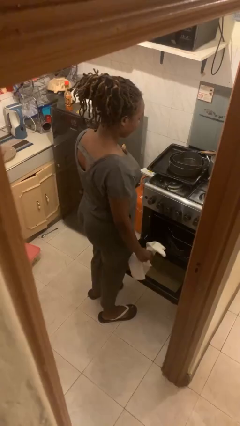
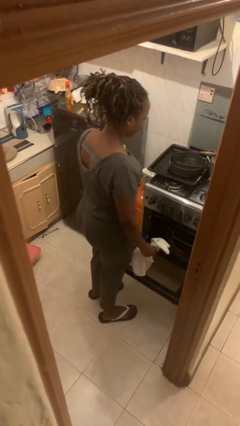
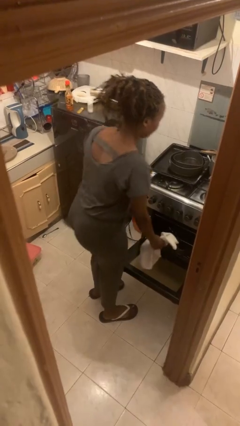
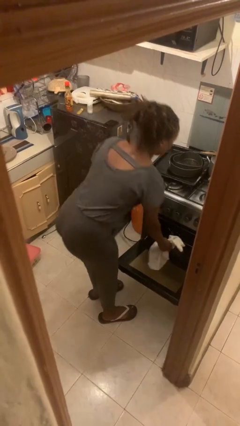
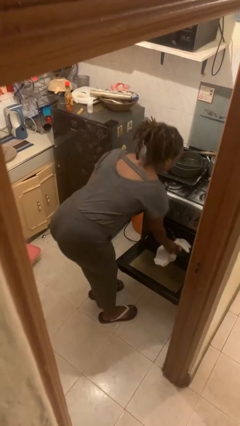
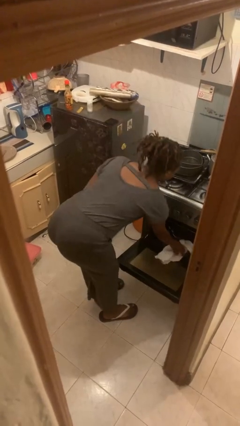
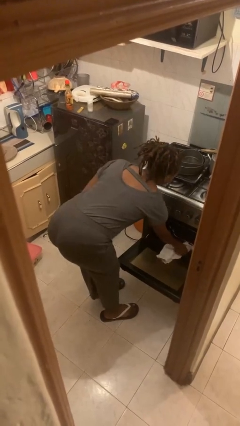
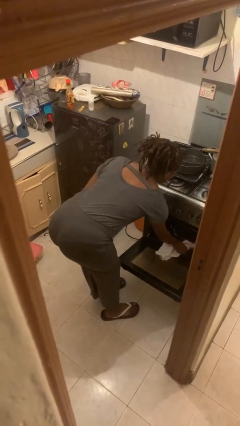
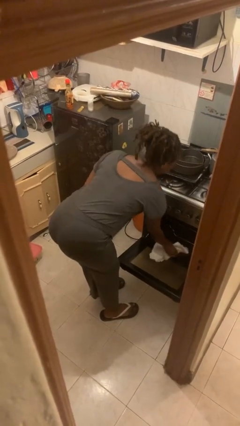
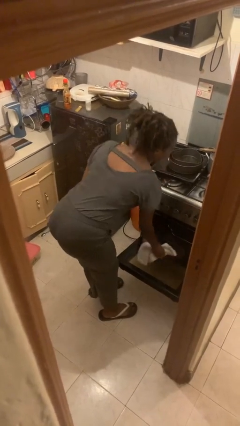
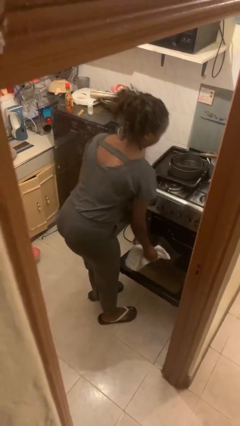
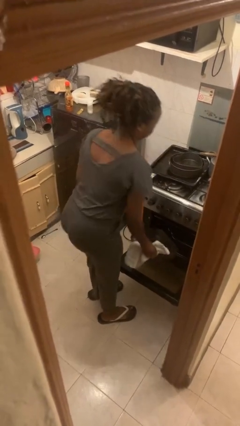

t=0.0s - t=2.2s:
person takes object from oven

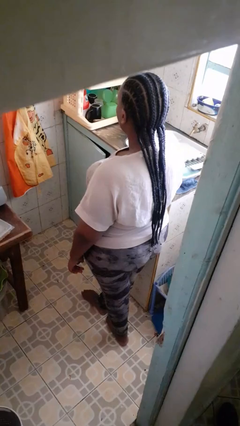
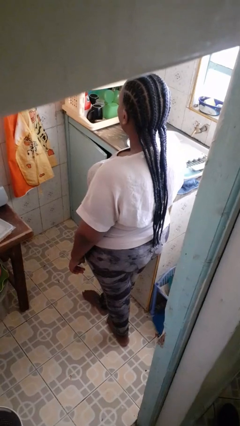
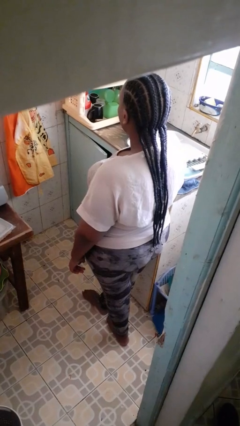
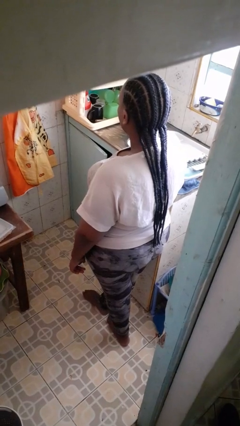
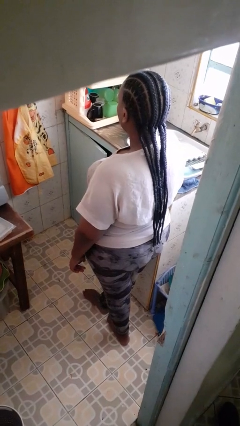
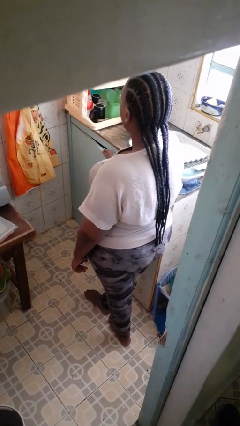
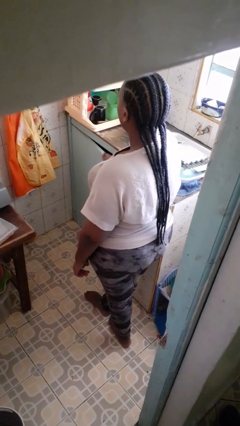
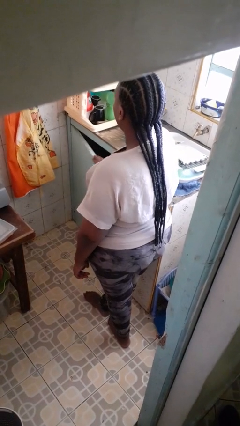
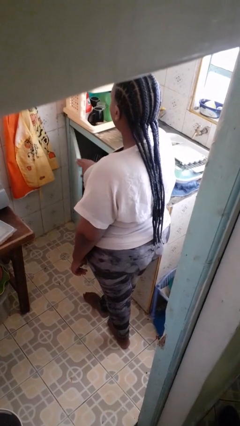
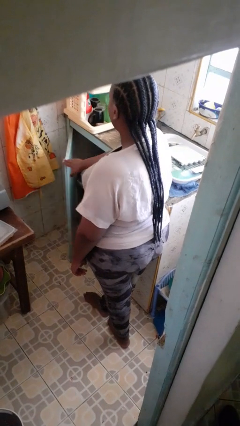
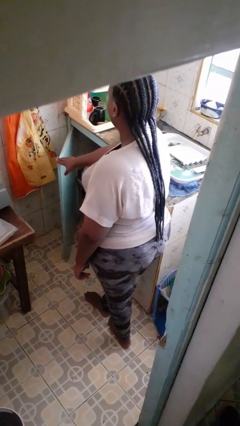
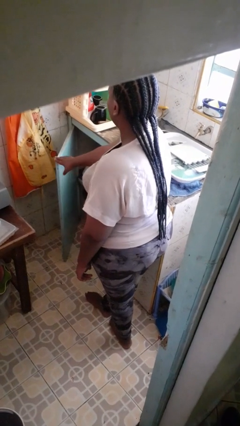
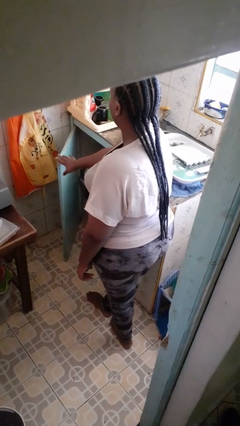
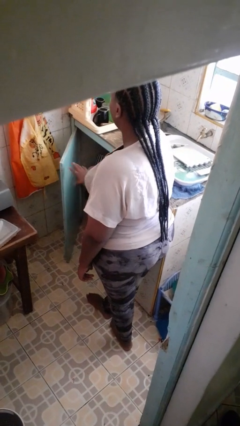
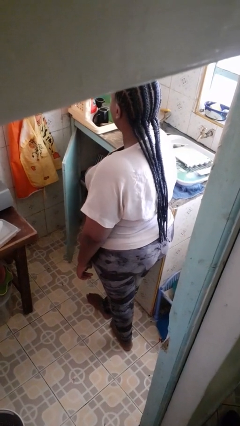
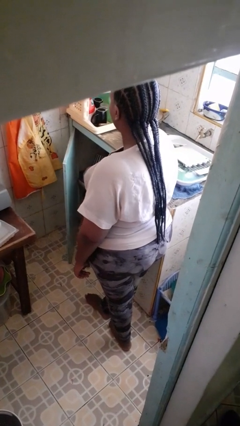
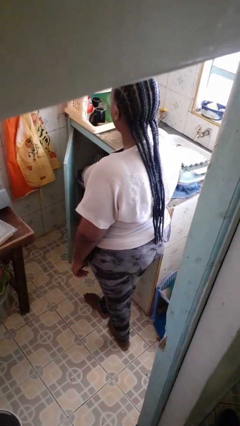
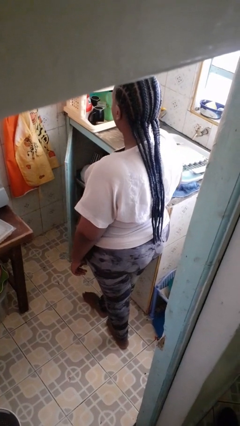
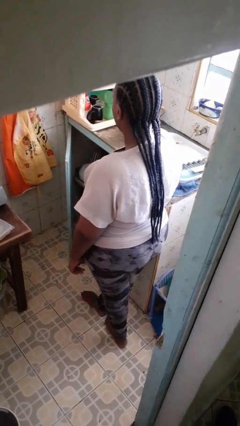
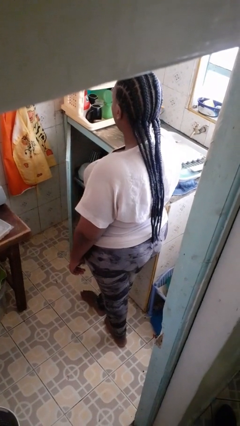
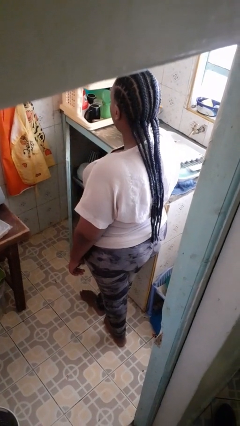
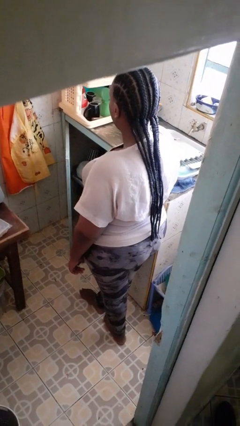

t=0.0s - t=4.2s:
person opens cabinet

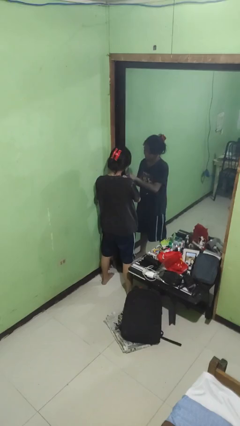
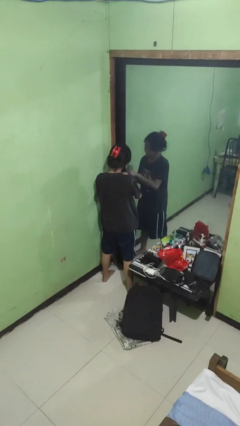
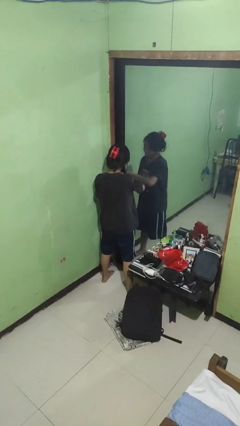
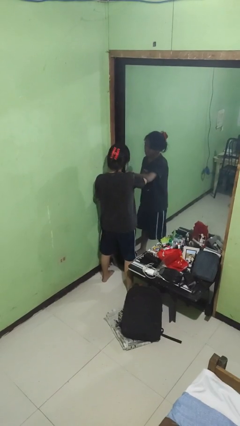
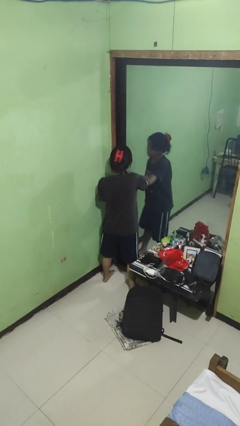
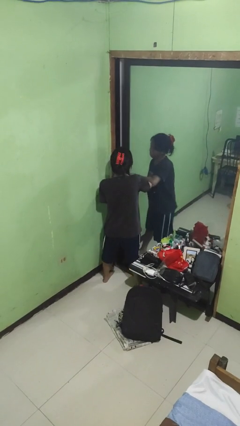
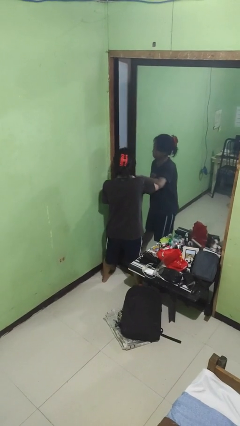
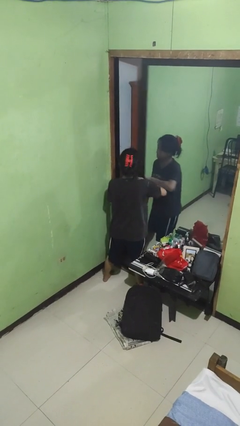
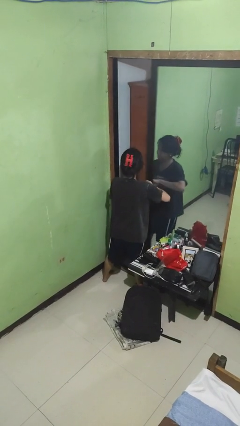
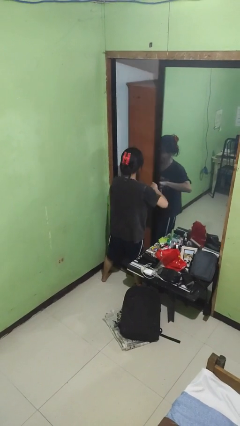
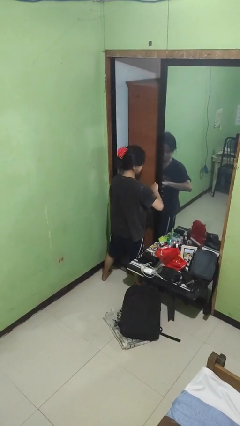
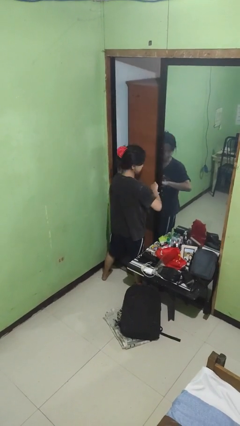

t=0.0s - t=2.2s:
person opens sliding door

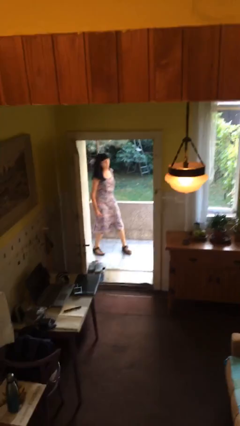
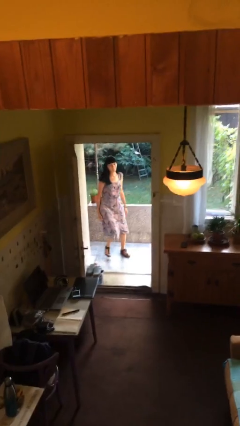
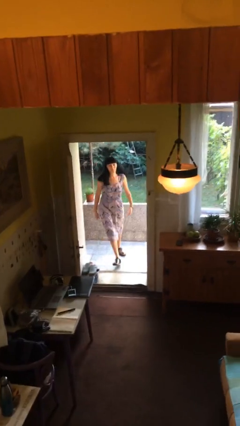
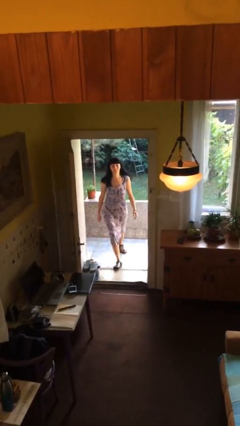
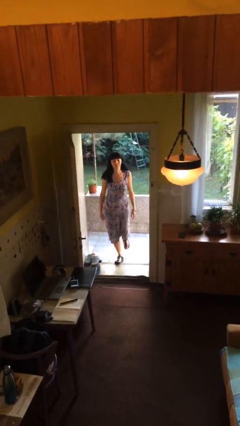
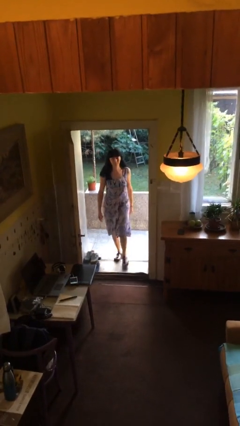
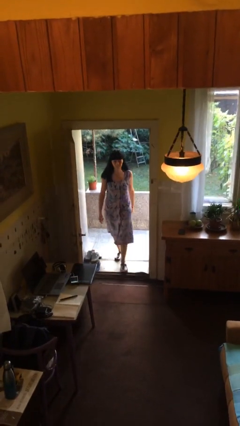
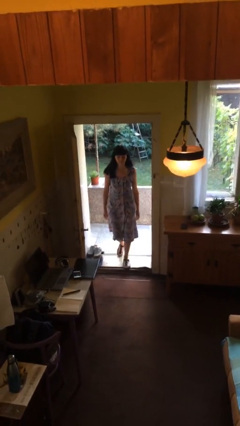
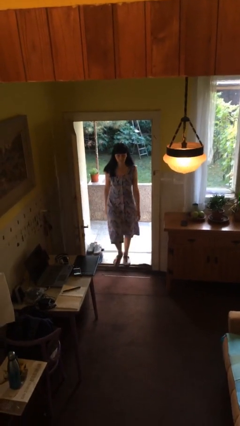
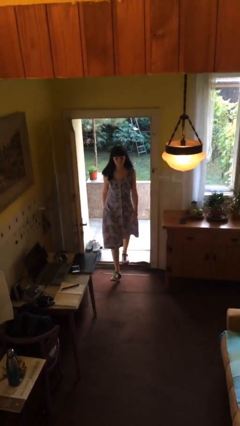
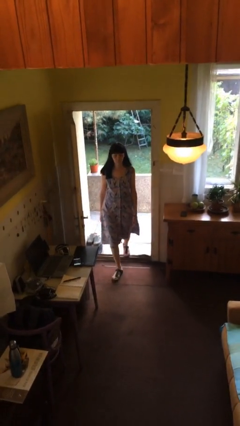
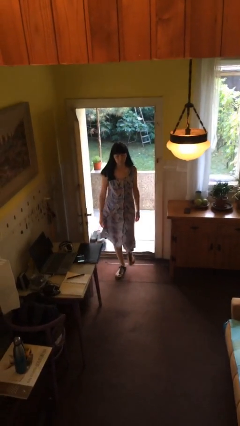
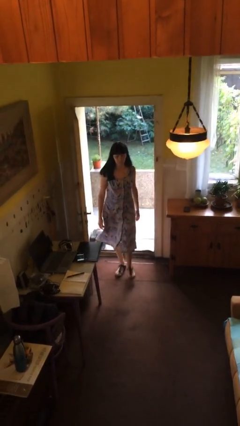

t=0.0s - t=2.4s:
person enters scene through structure

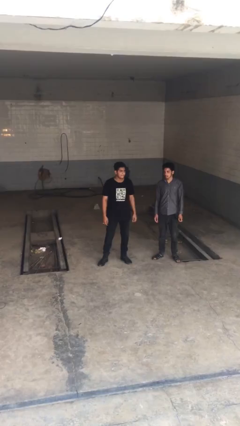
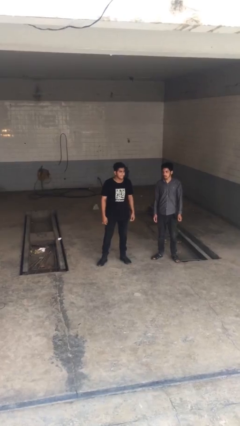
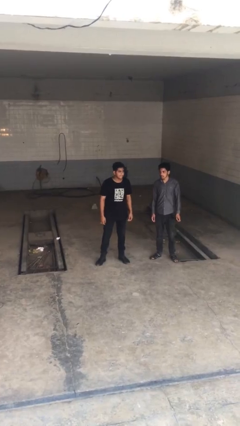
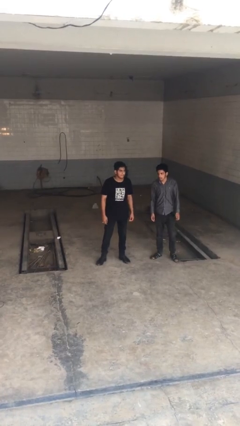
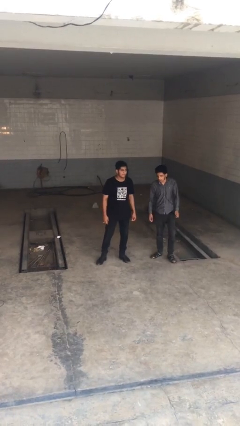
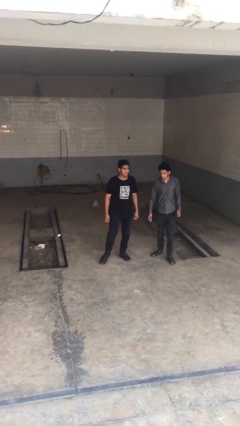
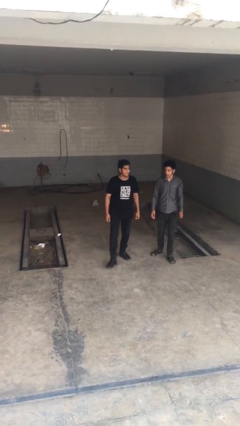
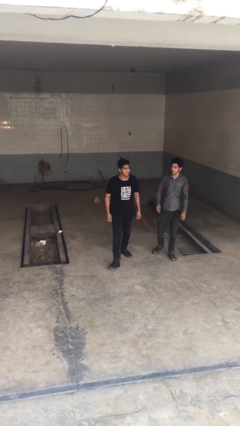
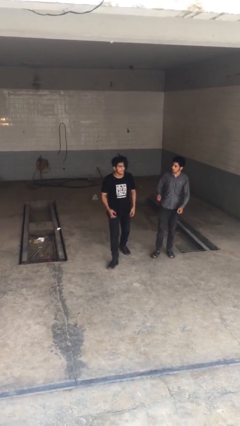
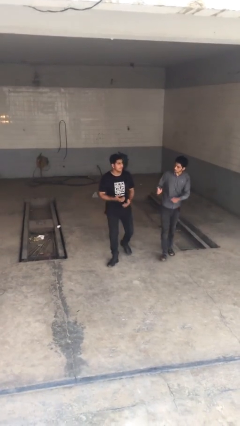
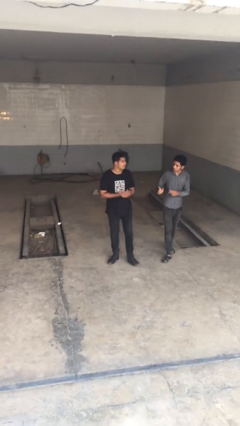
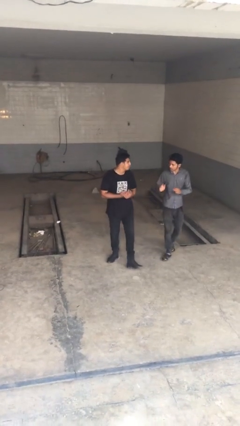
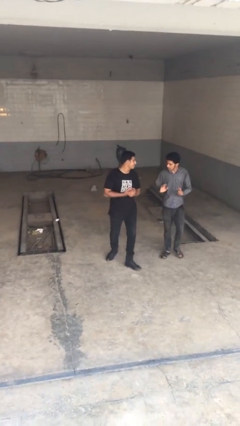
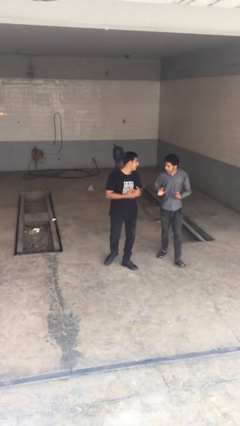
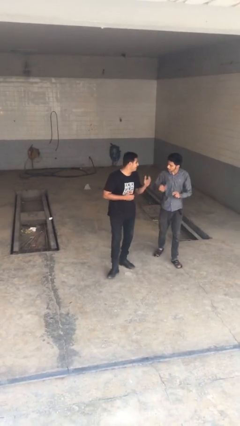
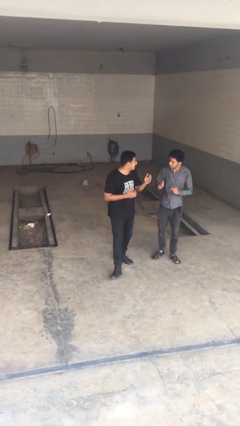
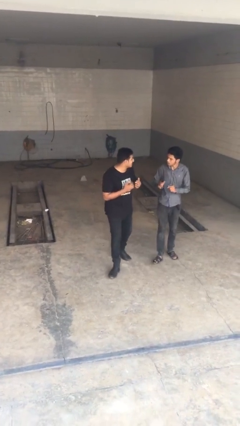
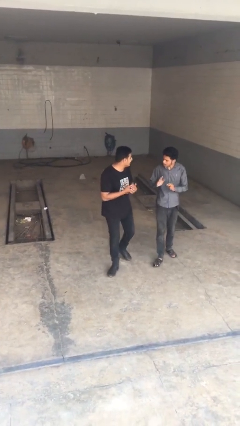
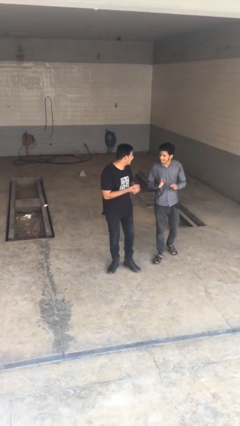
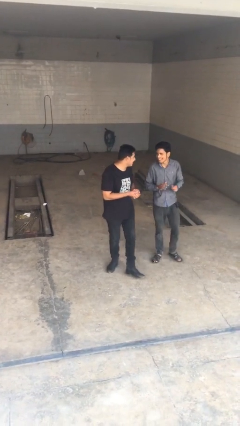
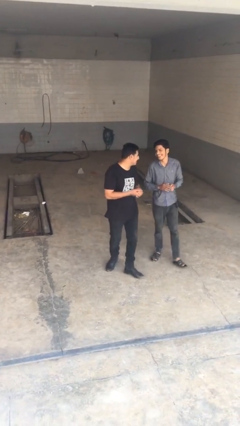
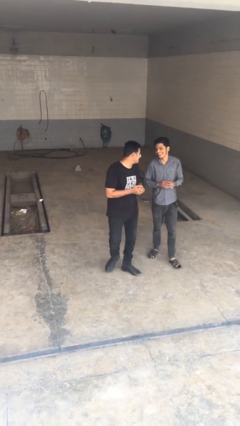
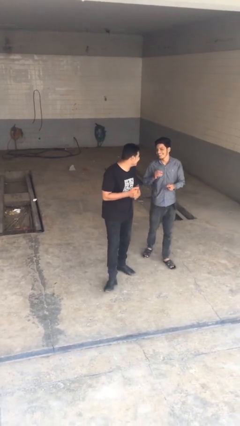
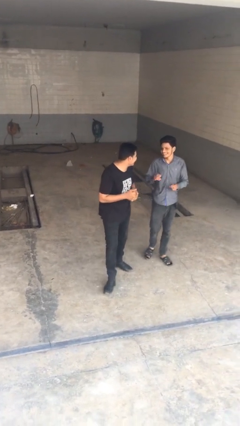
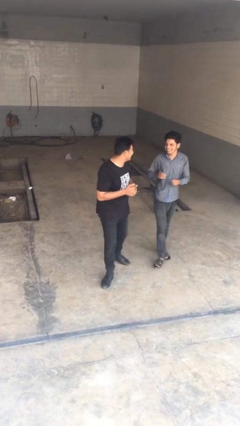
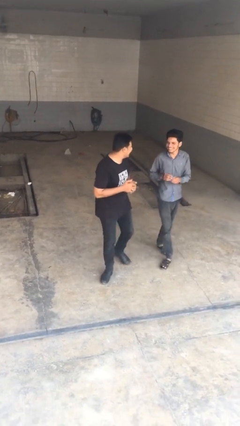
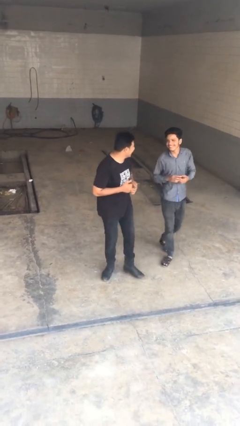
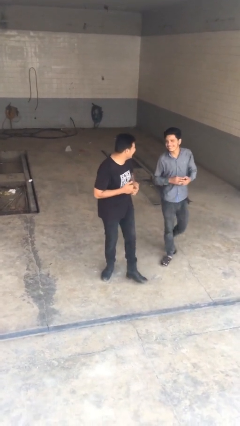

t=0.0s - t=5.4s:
person talks to person

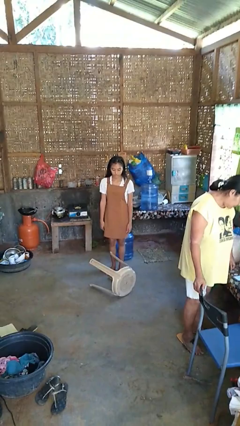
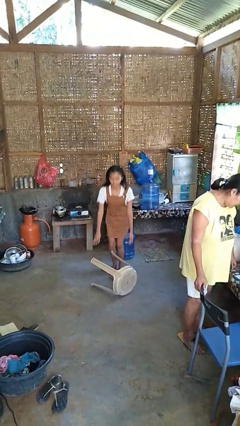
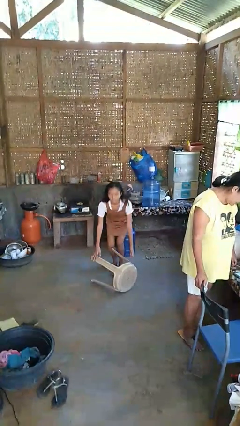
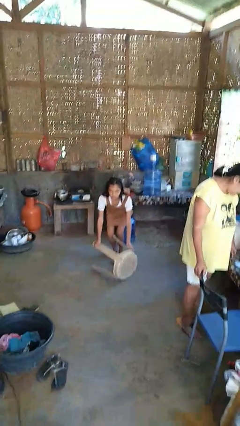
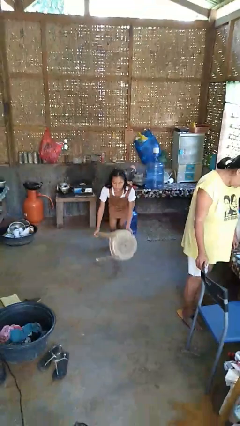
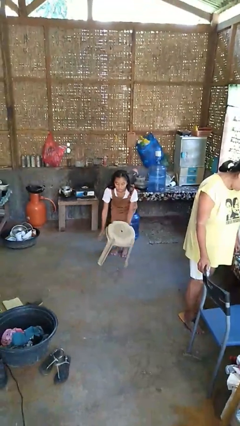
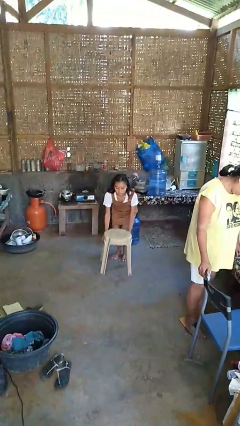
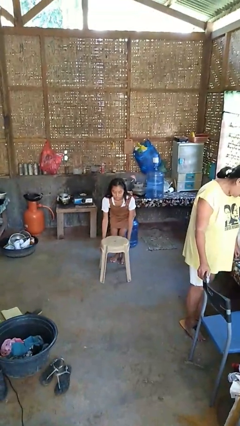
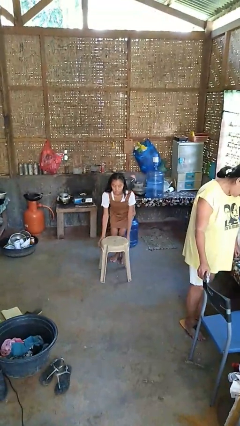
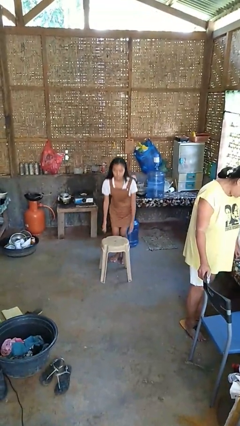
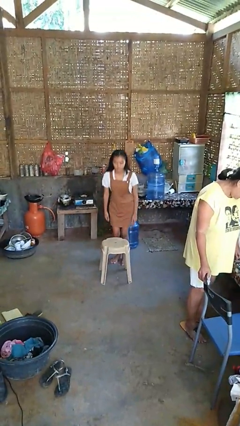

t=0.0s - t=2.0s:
person sets upright furniture
